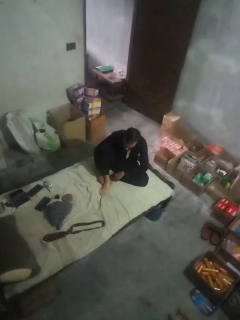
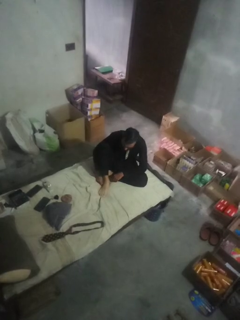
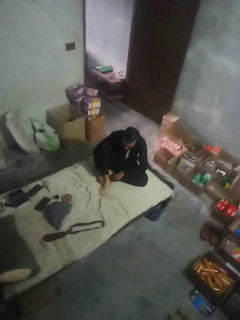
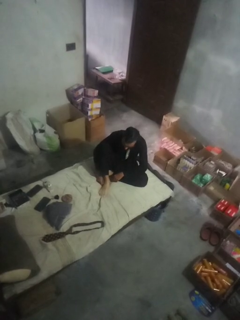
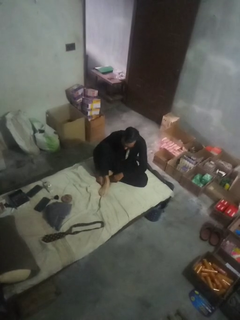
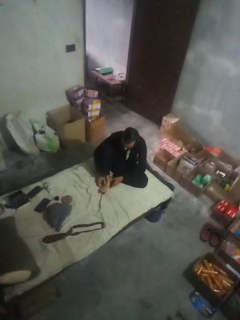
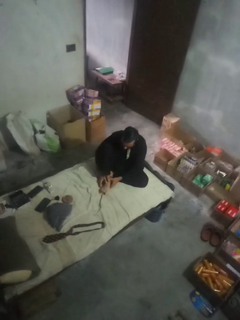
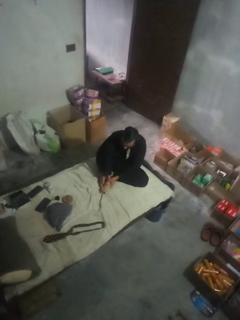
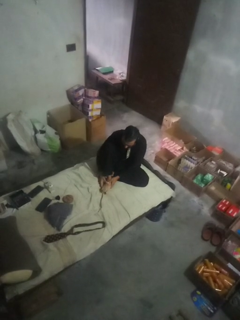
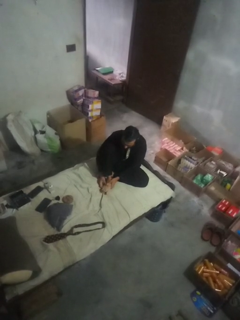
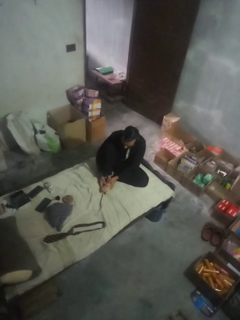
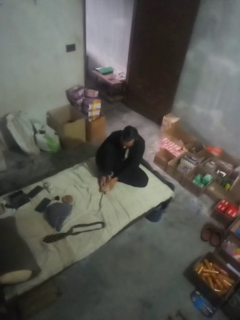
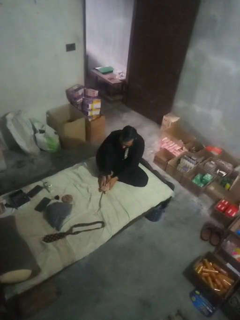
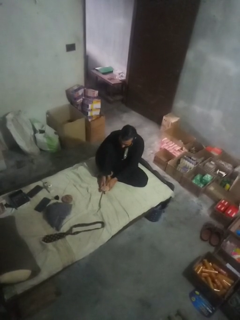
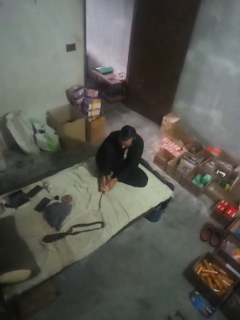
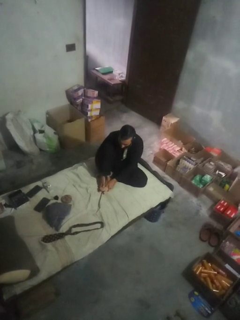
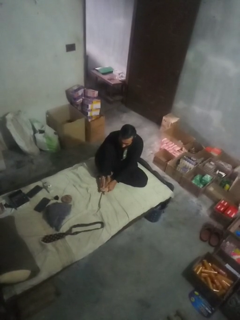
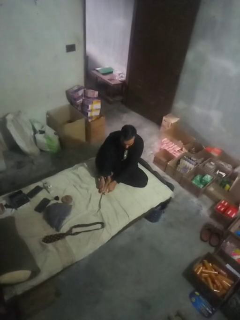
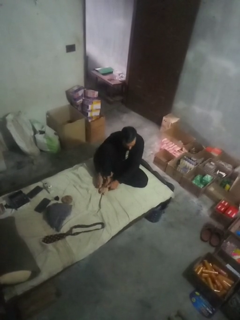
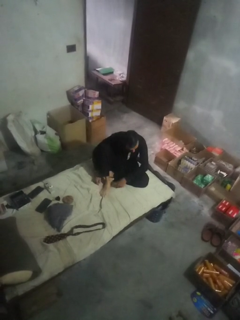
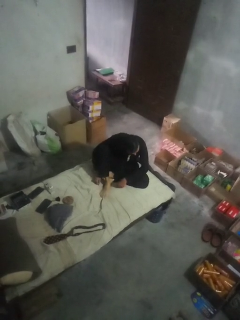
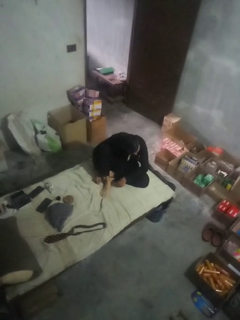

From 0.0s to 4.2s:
person rubs foot

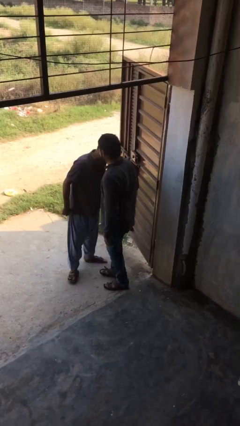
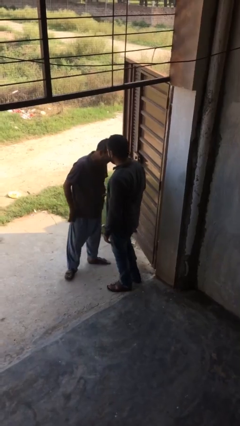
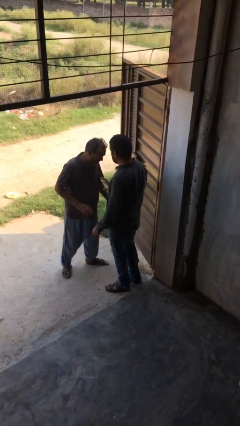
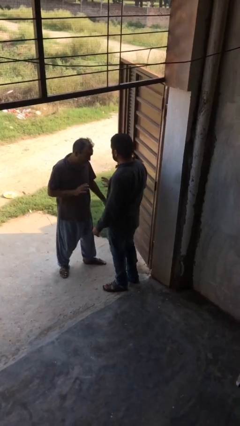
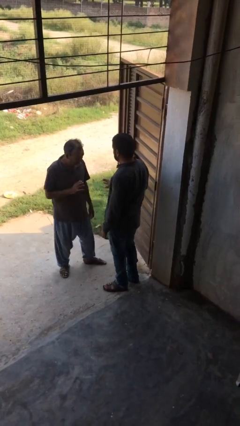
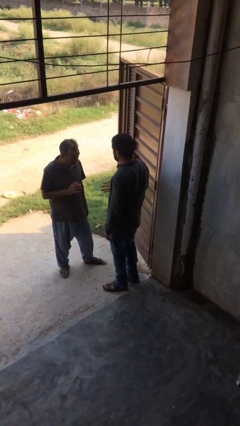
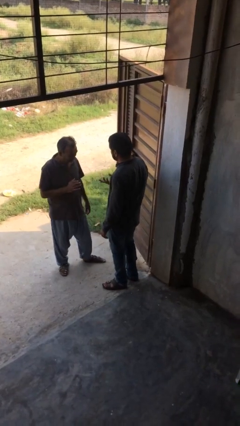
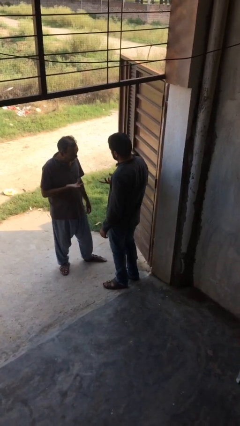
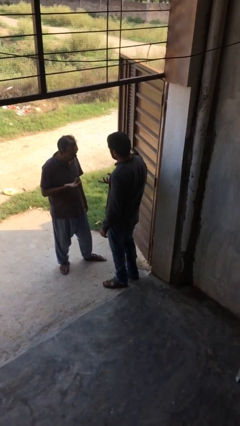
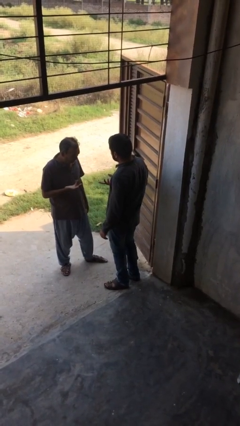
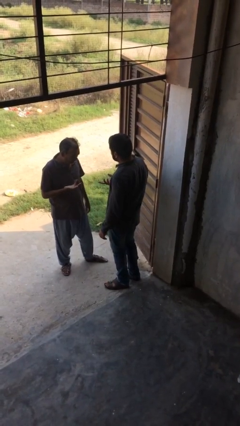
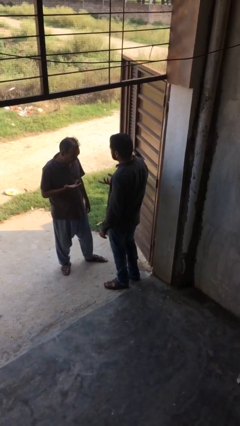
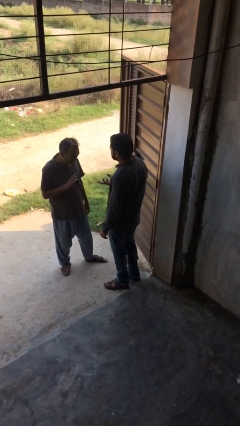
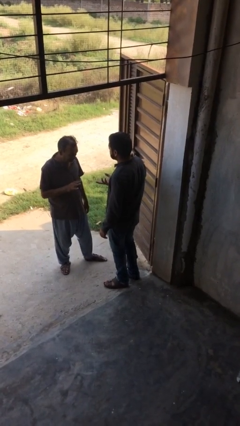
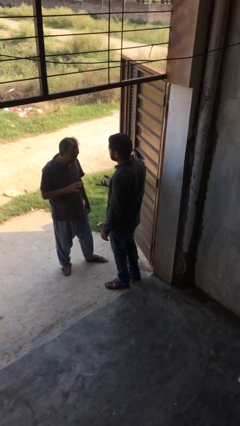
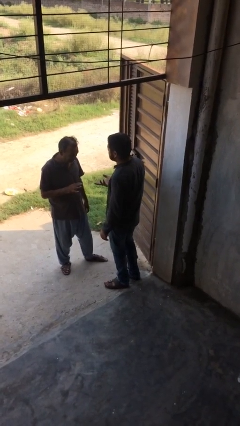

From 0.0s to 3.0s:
person talks to person

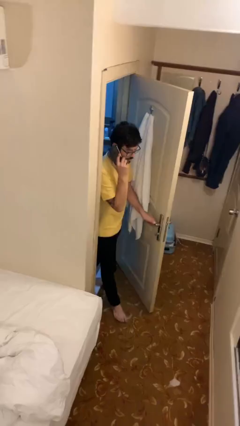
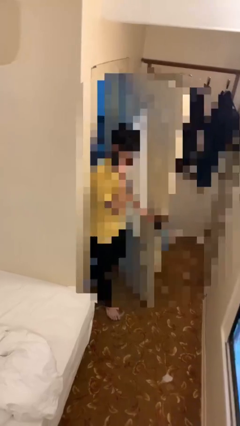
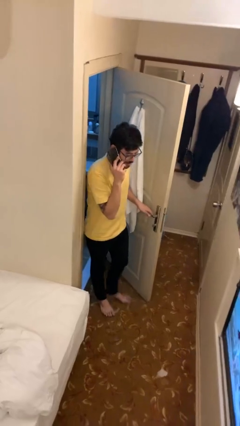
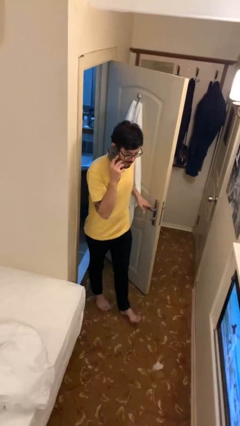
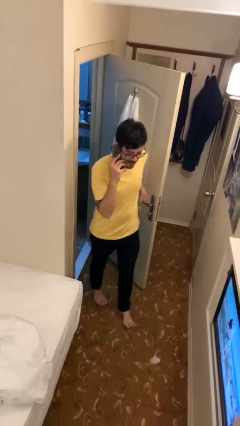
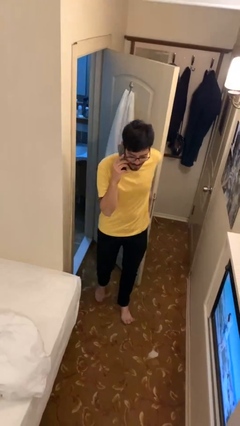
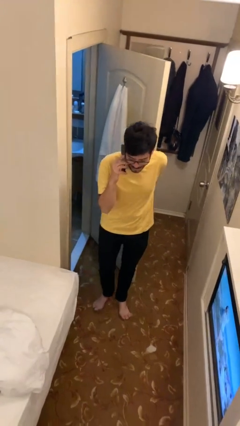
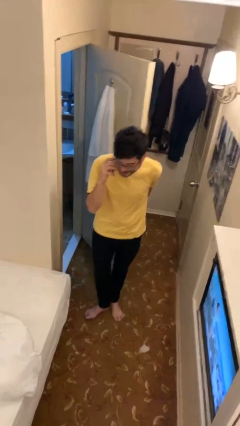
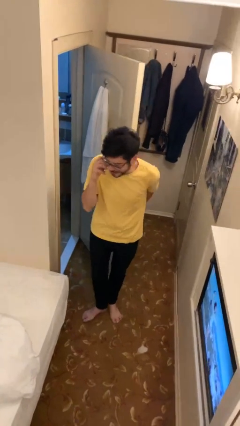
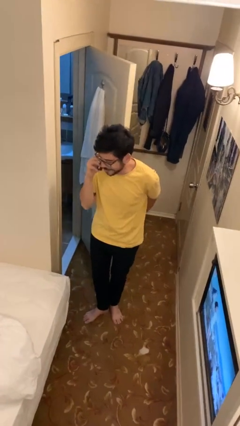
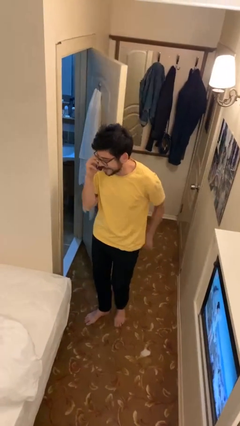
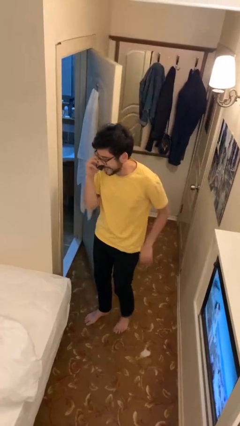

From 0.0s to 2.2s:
person enters scene through structure

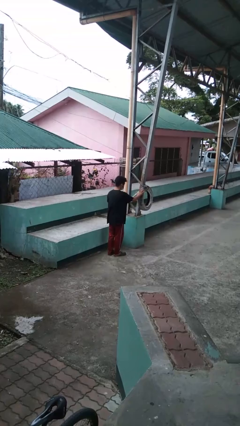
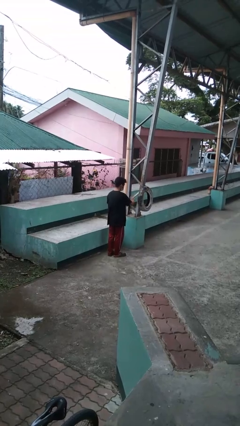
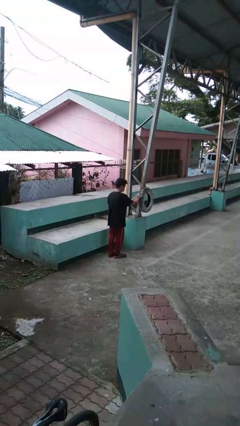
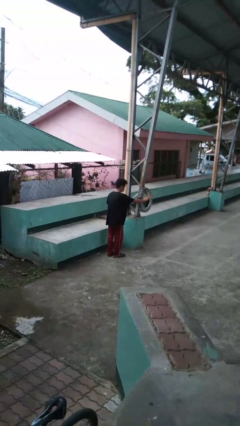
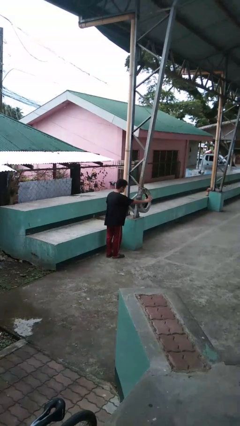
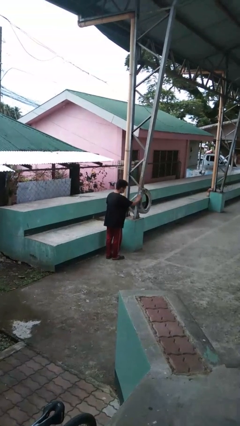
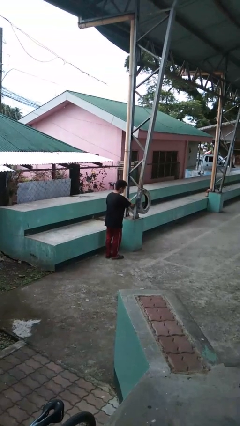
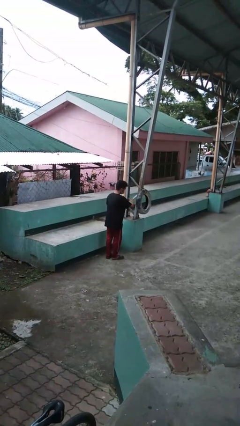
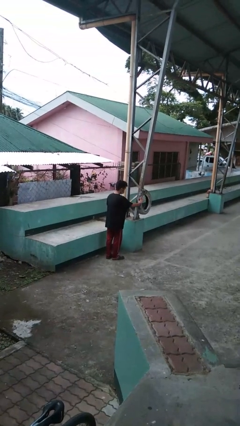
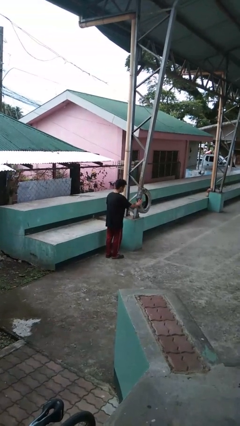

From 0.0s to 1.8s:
person waves hand over object

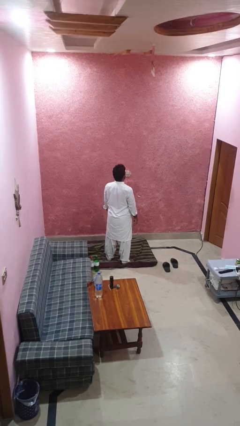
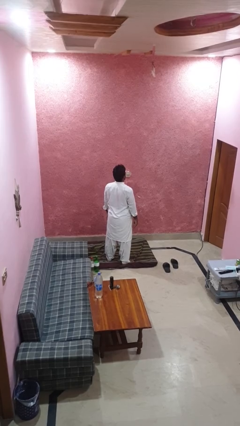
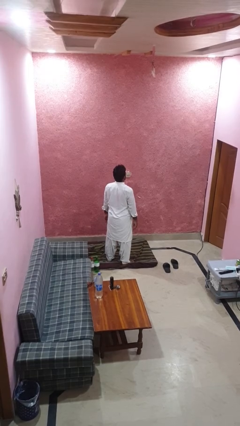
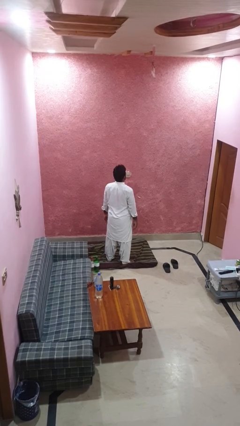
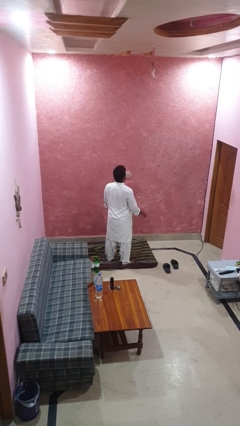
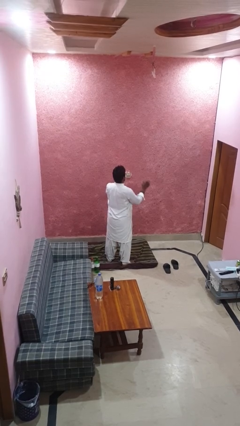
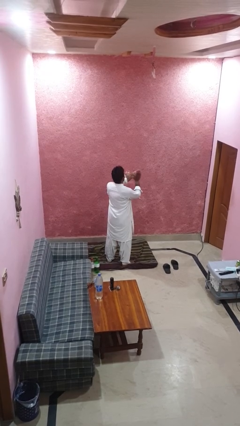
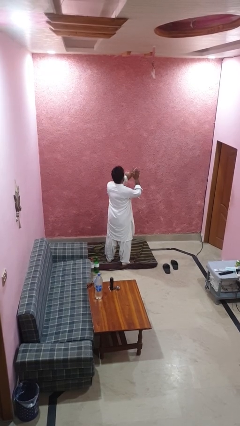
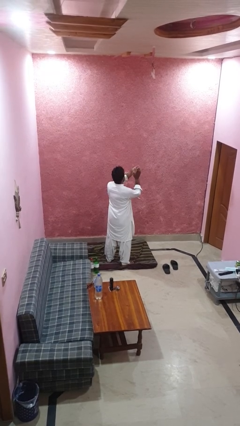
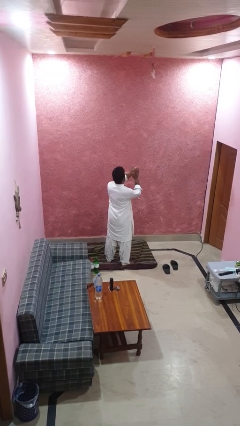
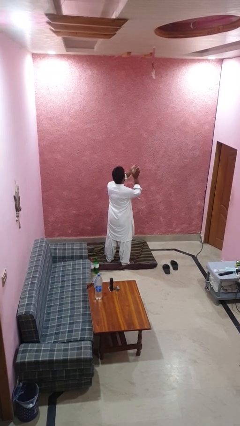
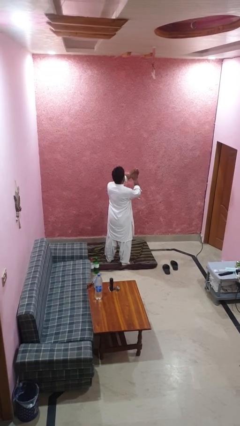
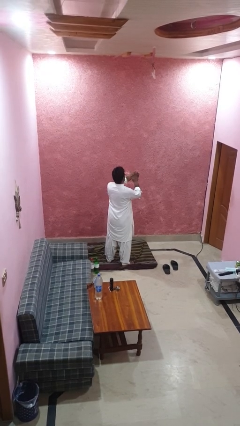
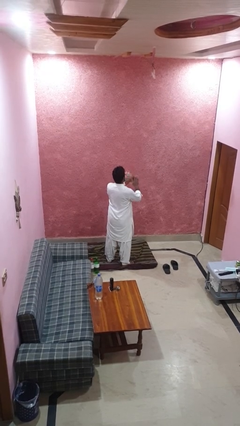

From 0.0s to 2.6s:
person claps hands

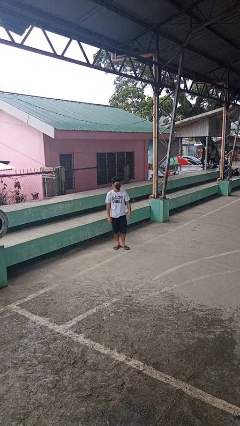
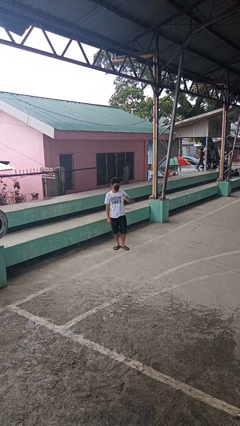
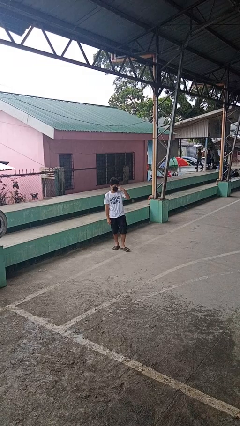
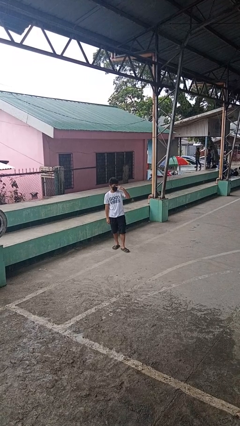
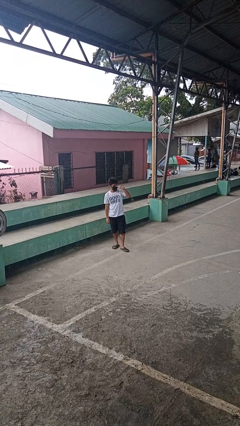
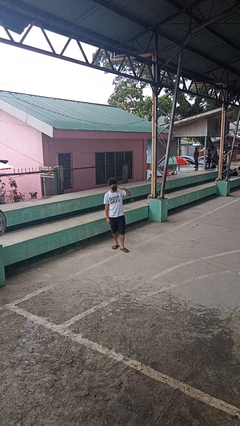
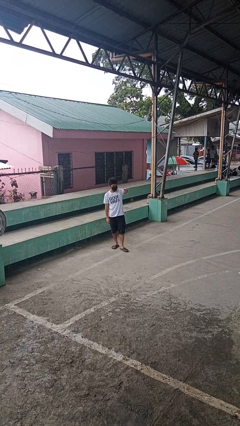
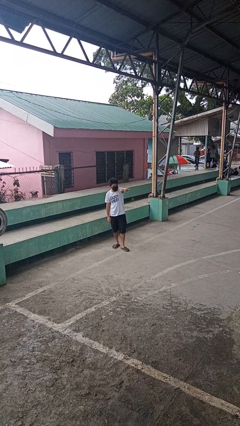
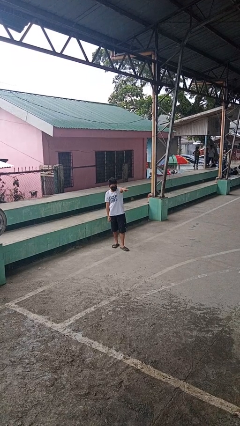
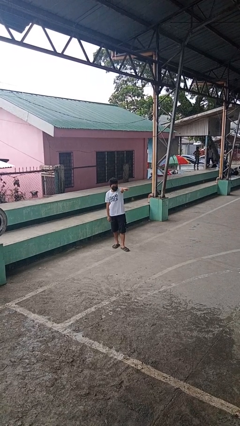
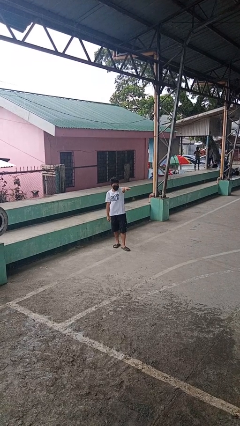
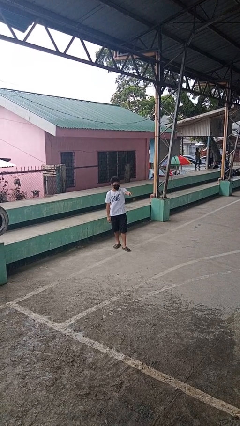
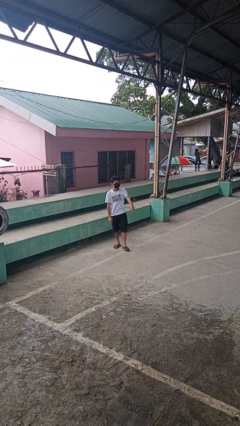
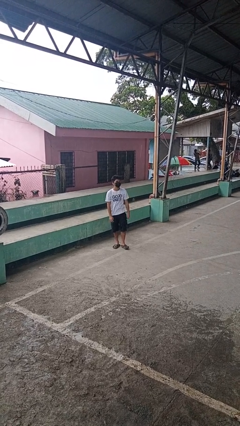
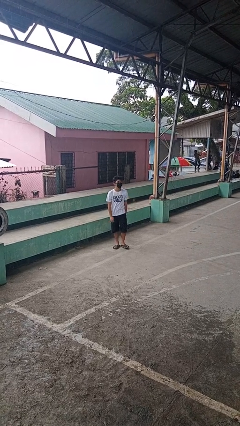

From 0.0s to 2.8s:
person gestures watch closely

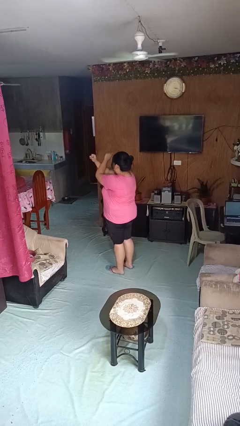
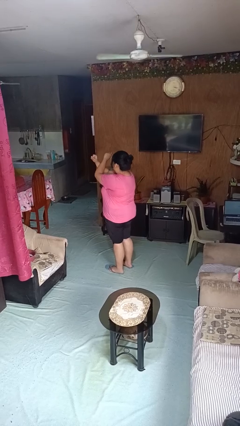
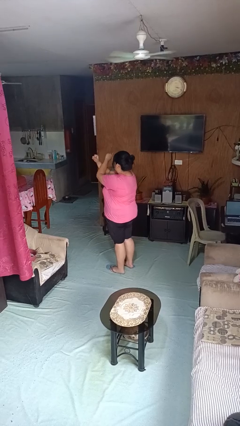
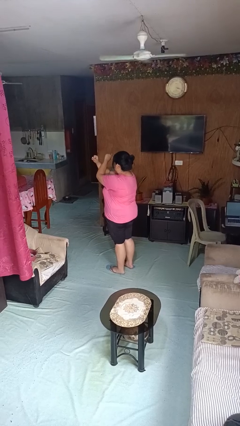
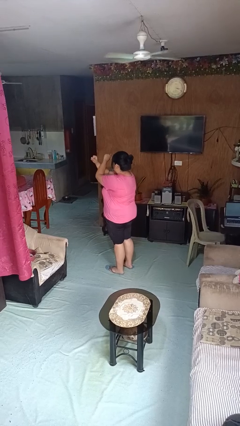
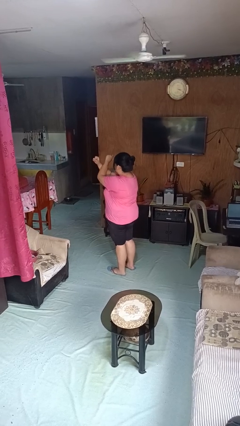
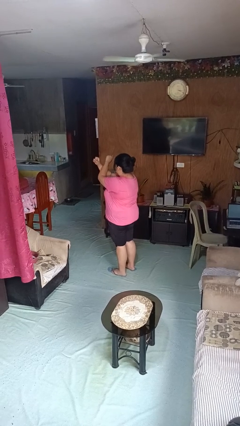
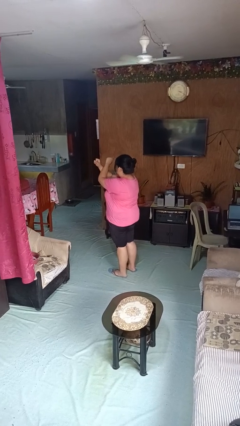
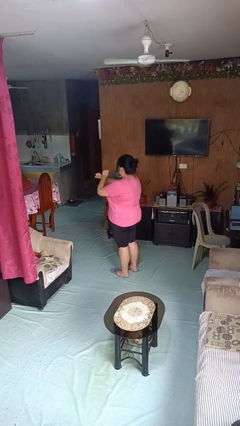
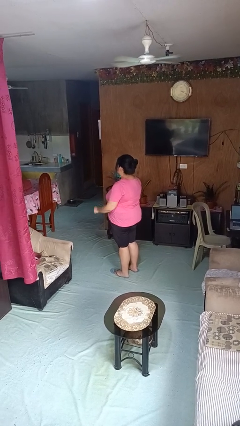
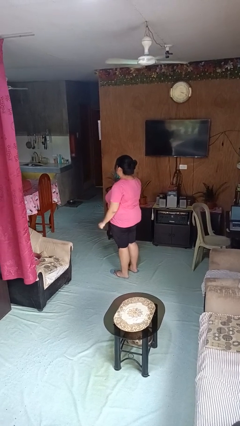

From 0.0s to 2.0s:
person gestures arms x
